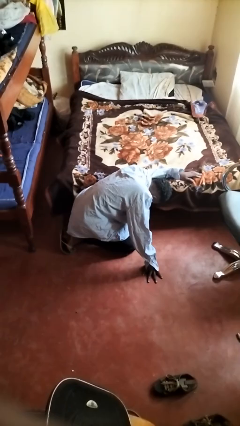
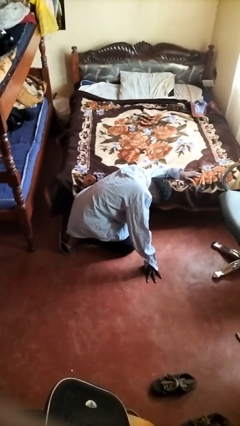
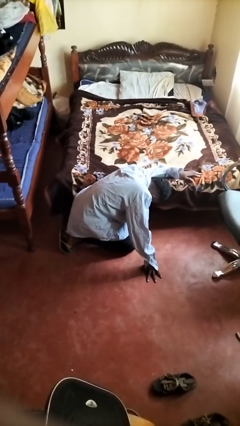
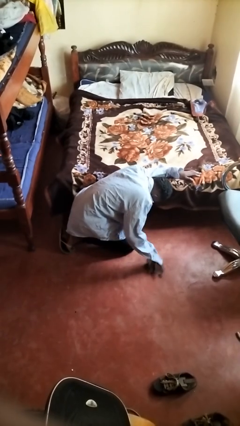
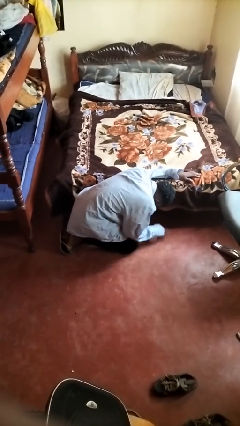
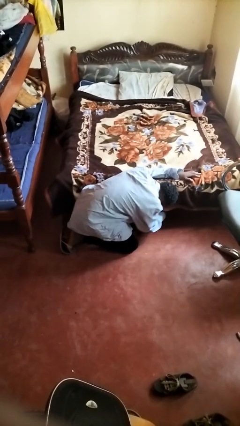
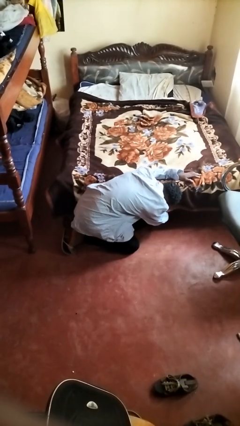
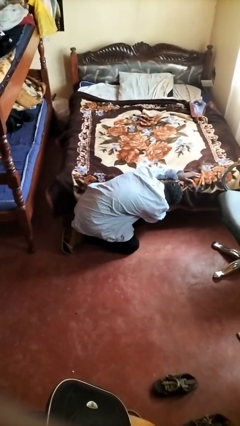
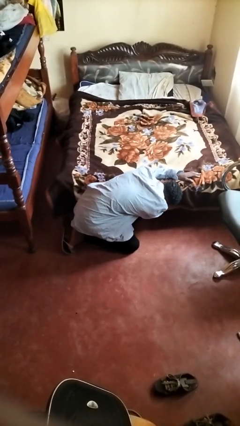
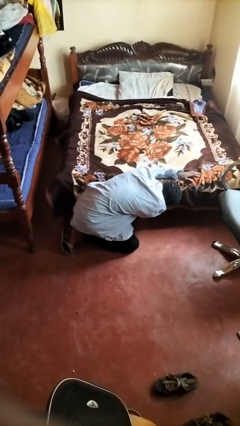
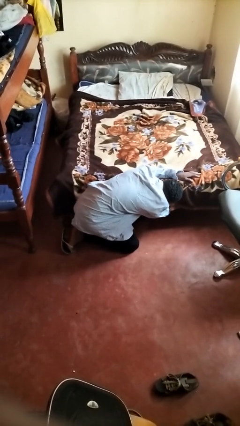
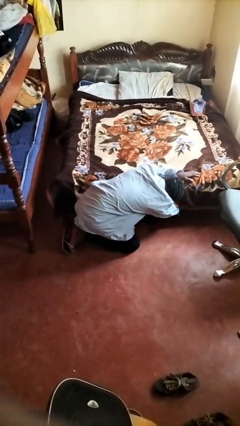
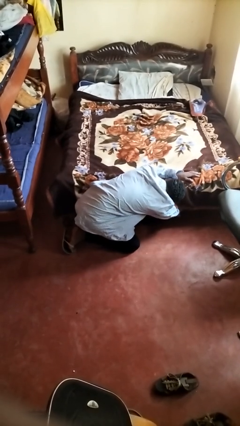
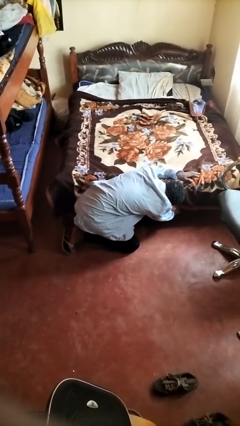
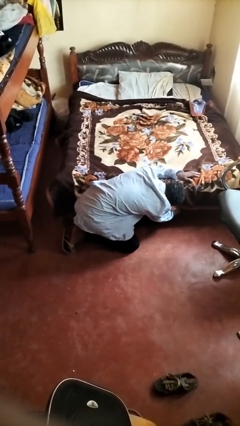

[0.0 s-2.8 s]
person searches under bed

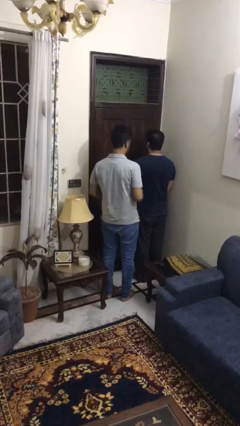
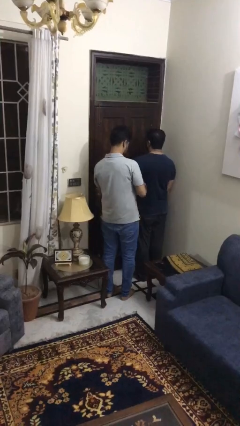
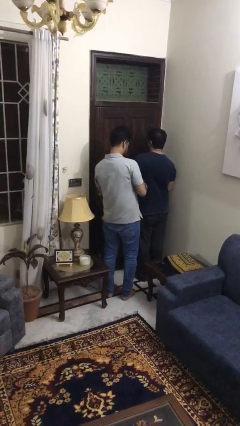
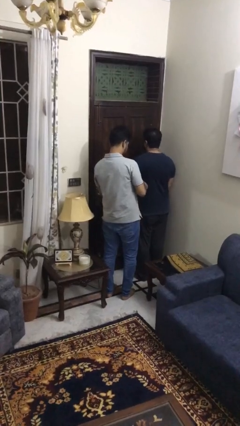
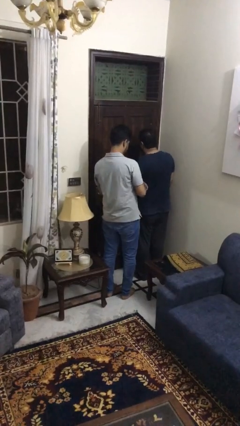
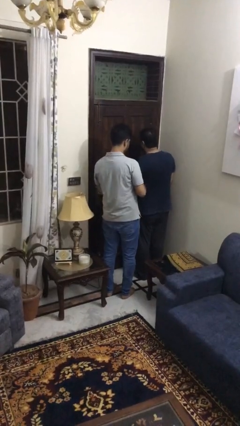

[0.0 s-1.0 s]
person tickles person

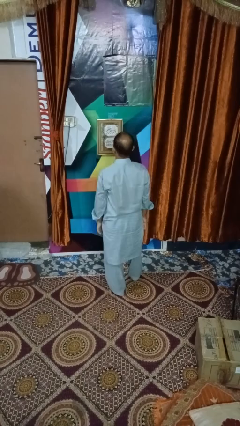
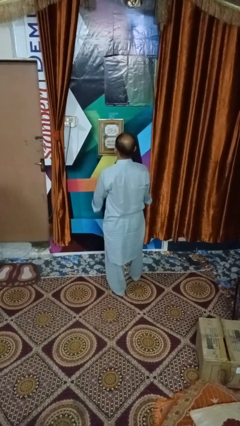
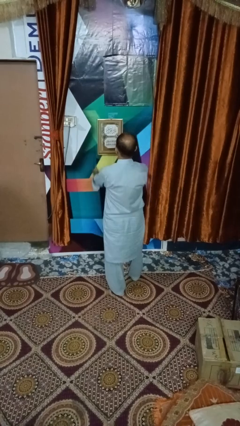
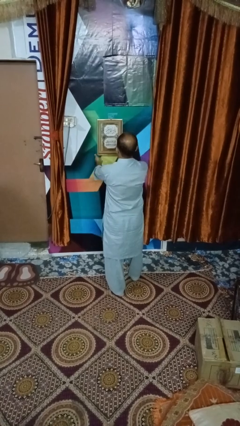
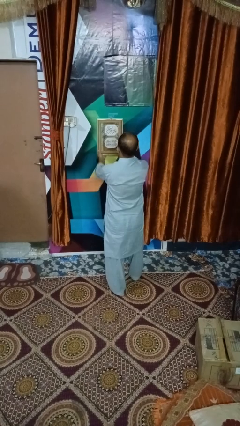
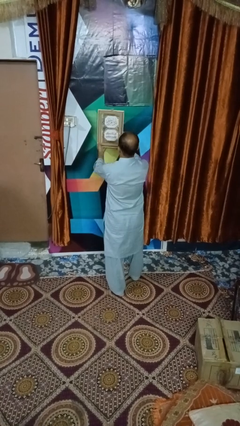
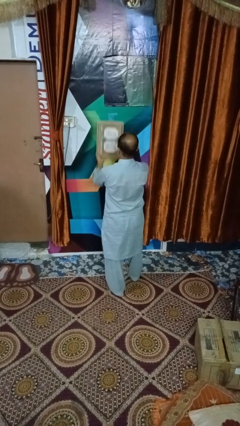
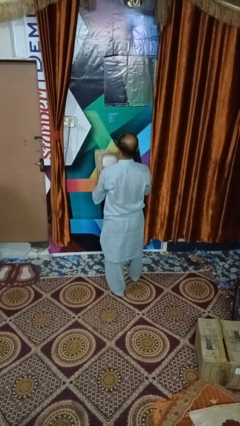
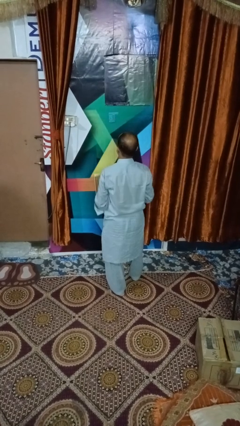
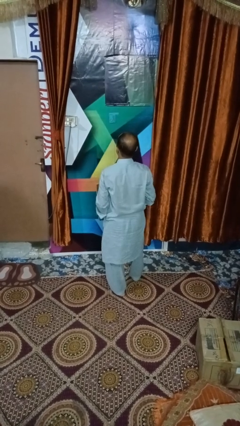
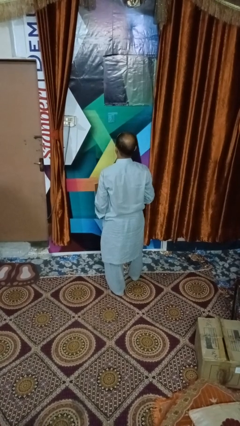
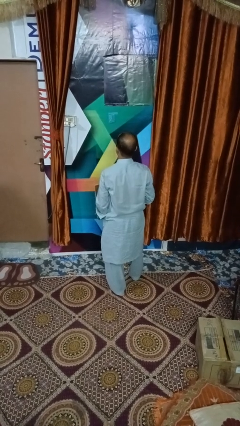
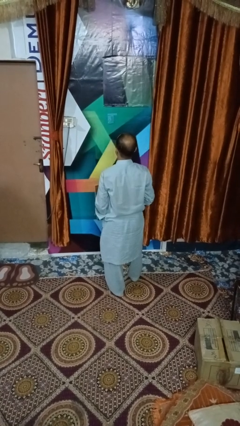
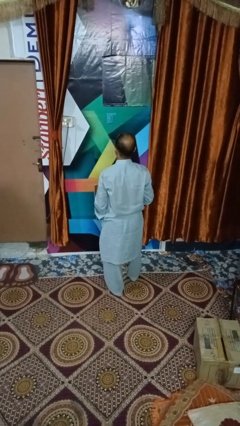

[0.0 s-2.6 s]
person takes down picture frame

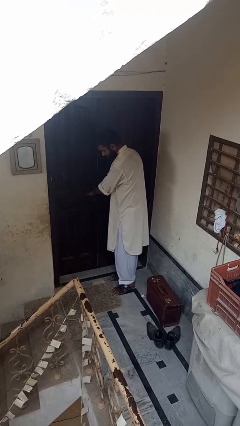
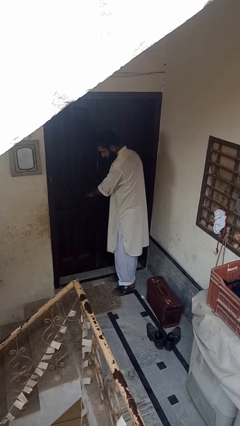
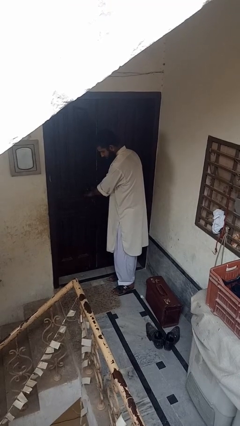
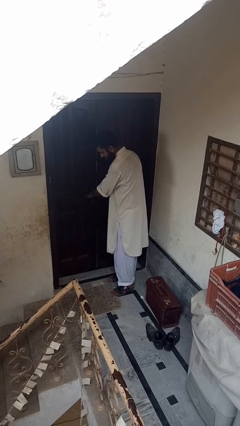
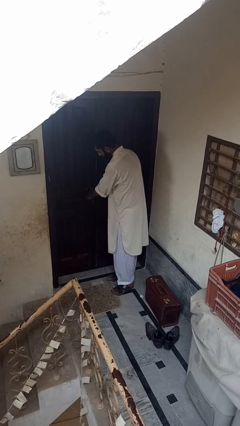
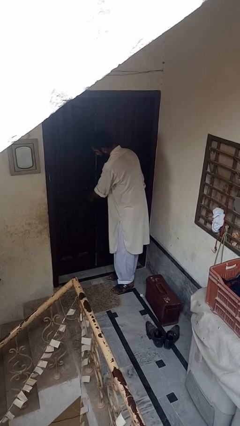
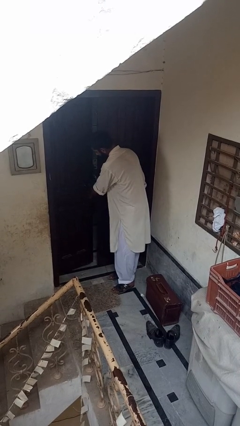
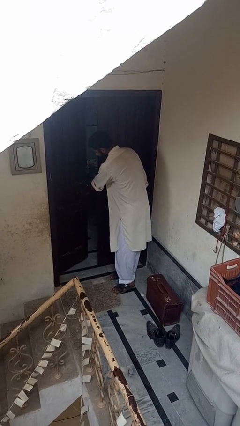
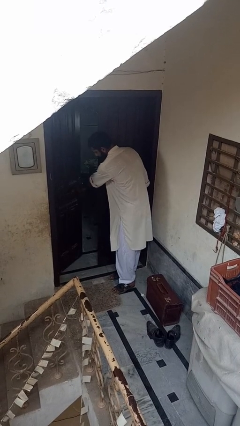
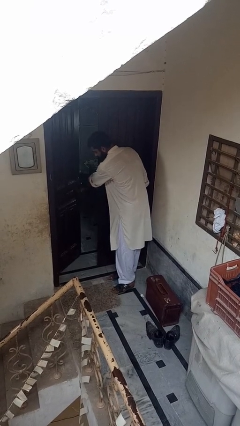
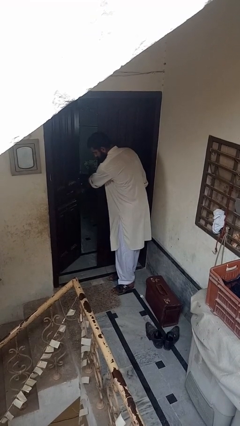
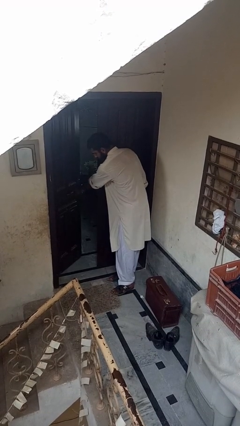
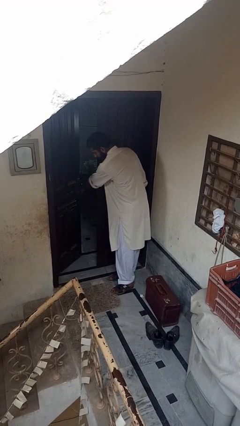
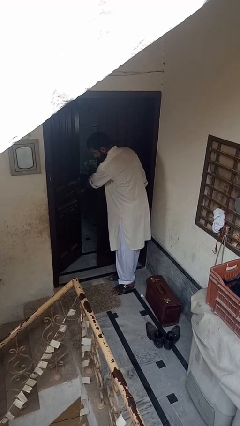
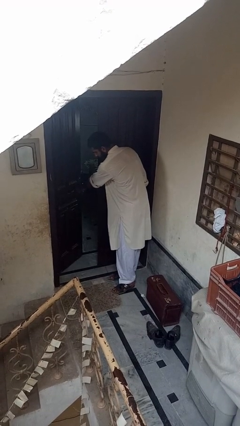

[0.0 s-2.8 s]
person opens facility door

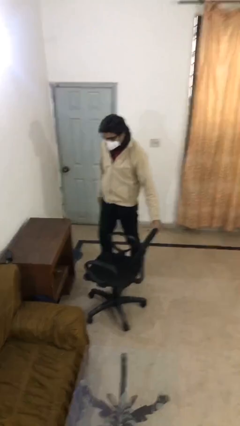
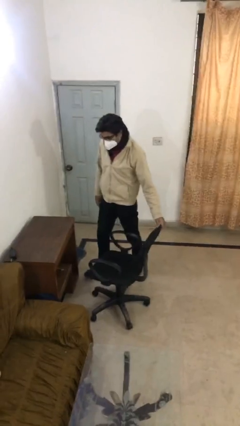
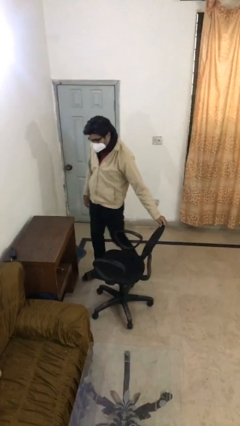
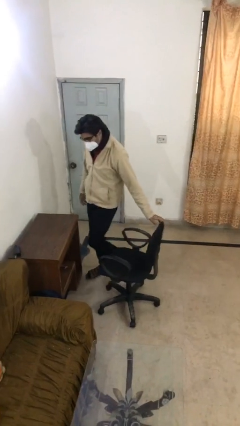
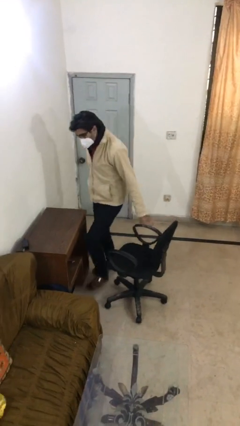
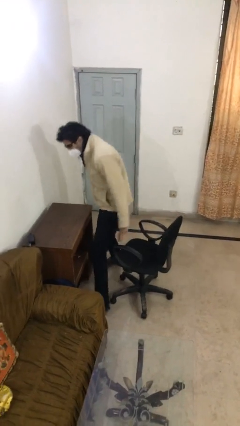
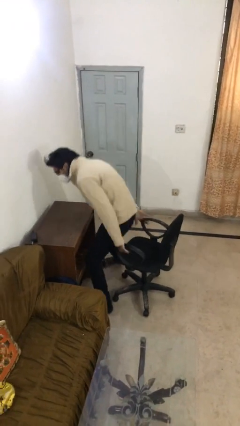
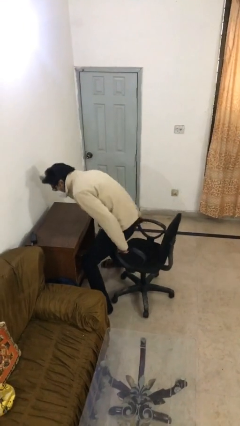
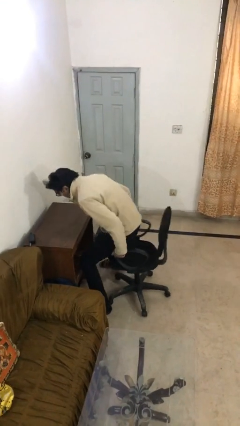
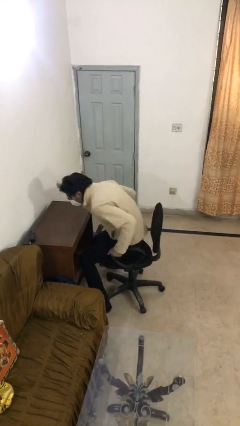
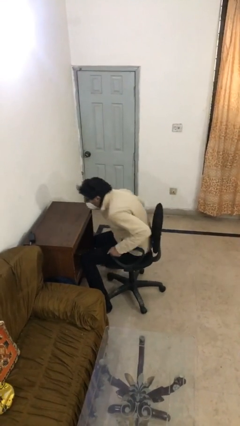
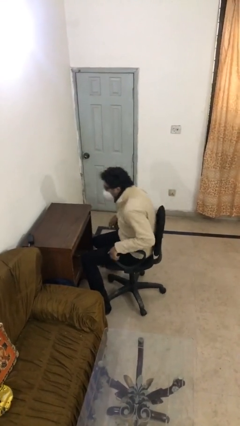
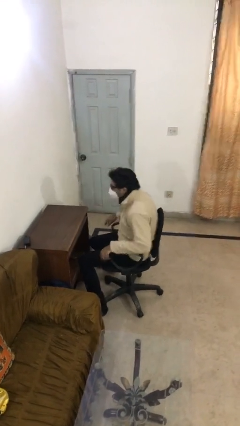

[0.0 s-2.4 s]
person sits down

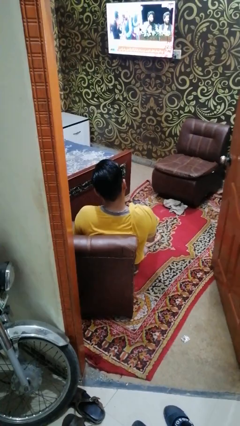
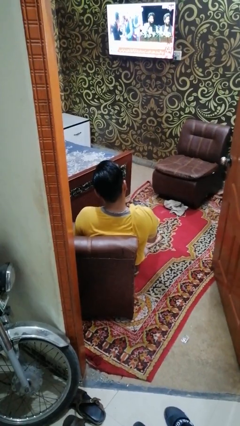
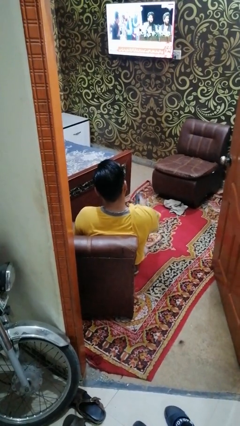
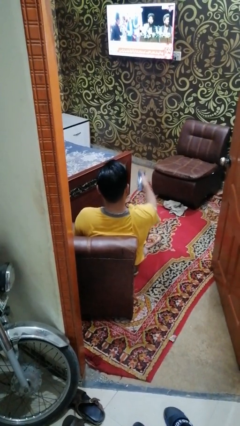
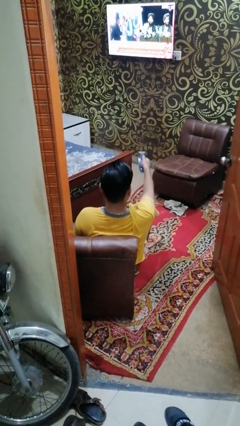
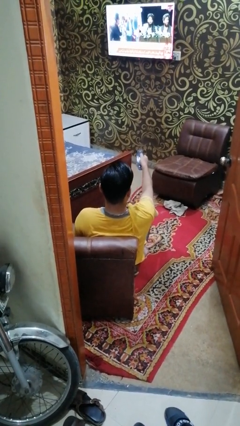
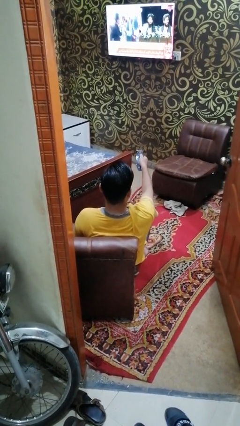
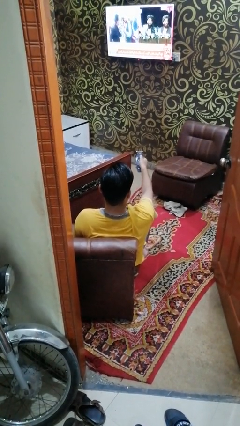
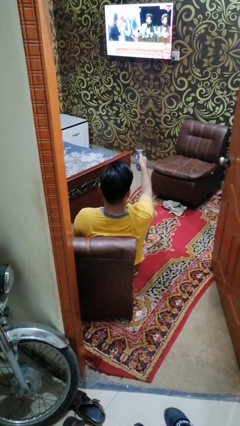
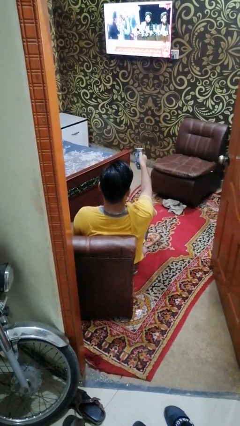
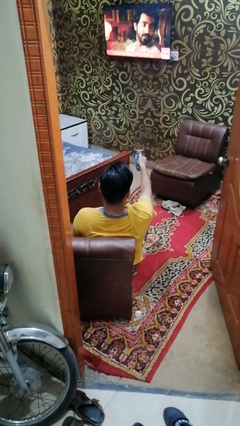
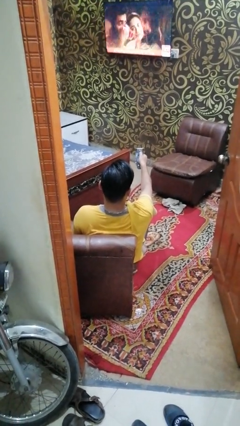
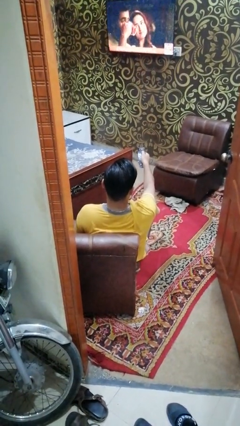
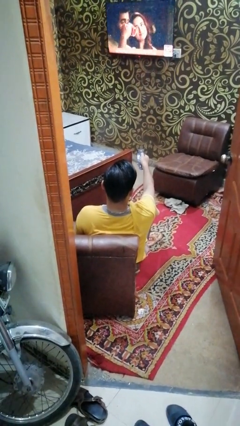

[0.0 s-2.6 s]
person uses television remote

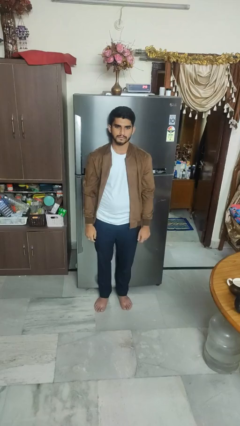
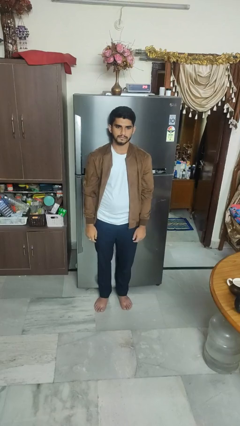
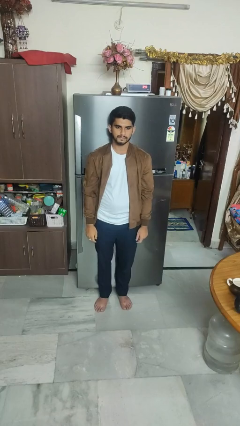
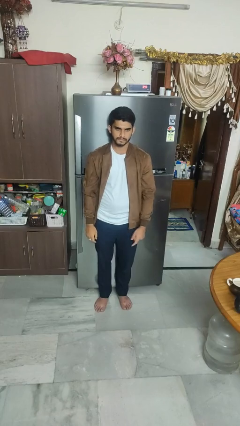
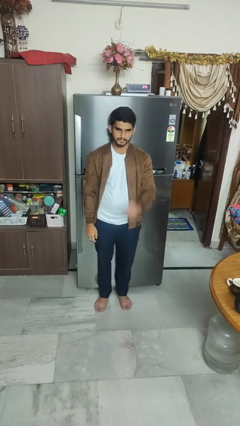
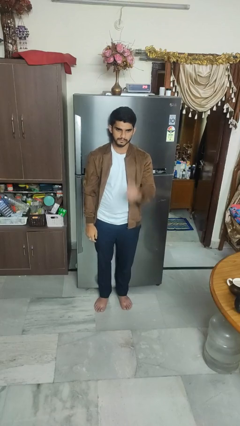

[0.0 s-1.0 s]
person gestures number one

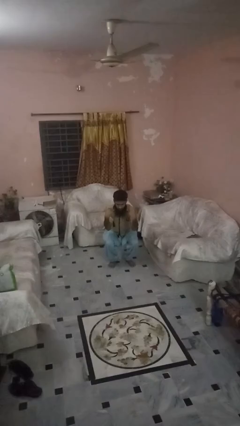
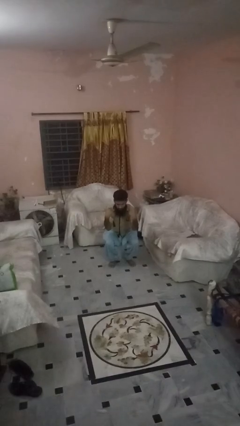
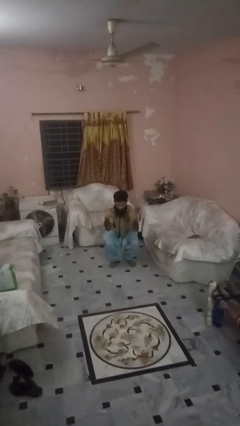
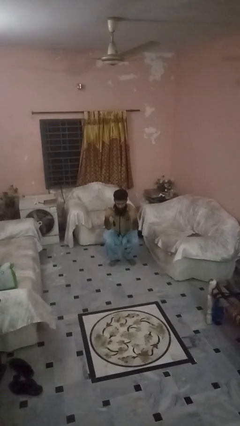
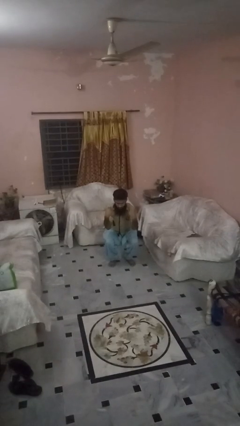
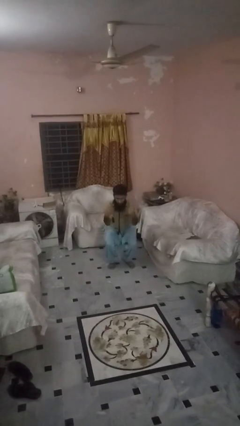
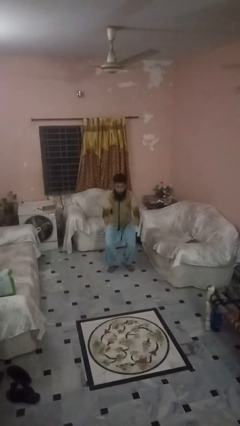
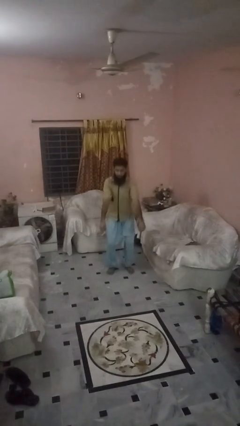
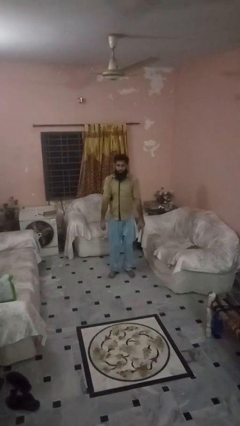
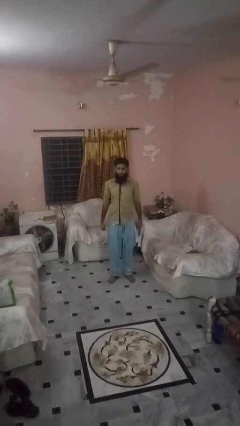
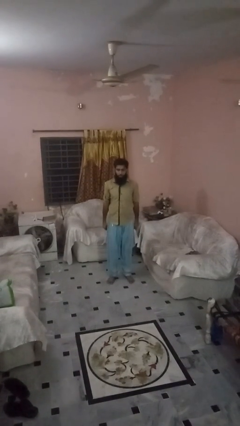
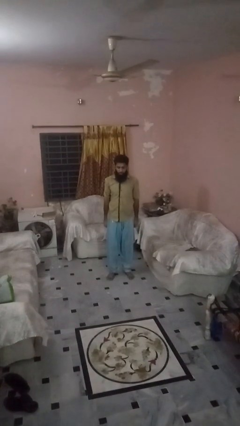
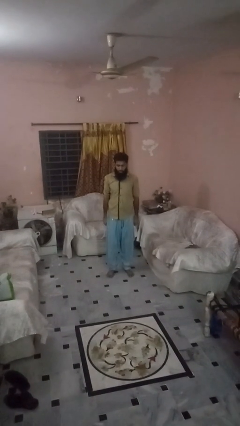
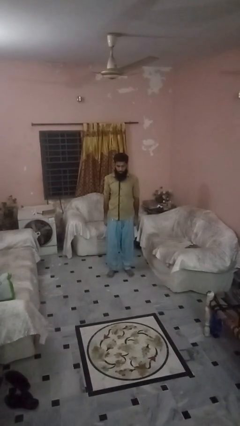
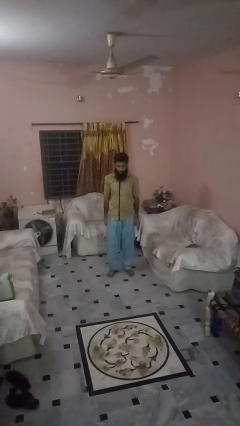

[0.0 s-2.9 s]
person stands up
